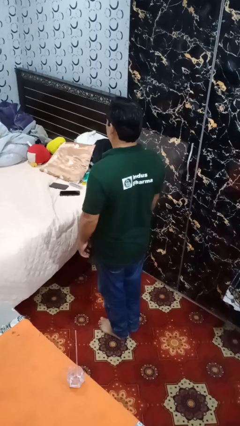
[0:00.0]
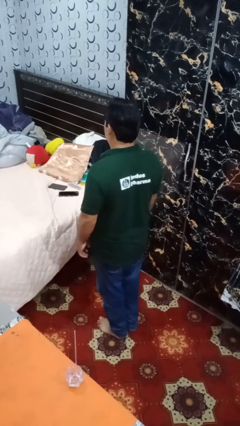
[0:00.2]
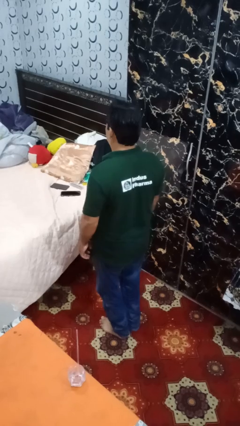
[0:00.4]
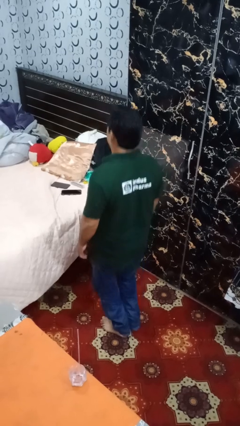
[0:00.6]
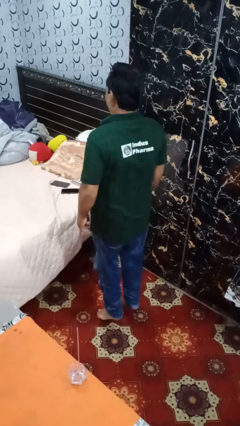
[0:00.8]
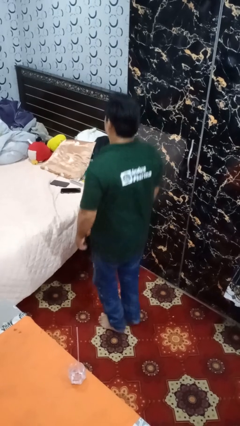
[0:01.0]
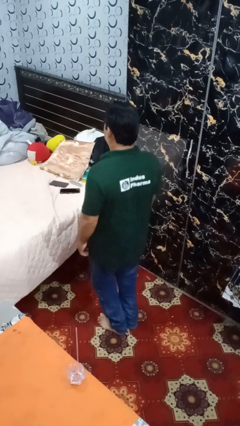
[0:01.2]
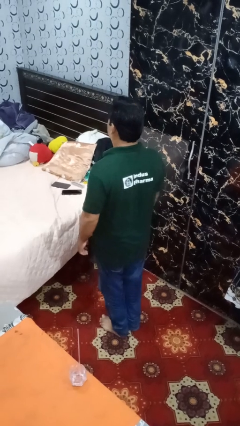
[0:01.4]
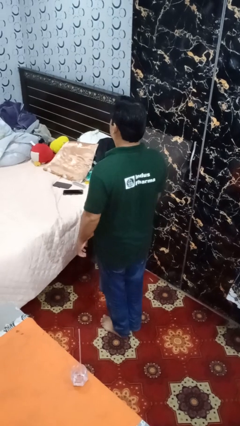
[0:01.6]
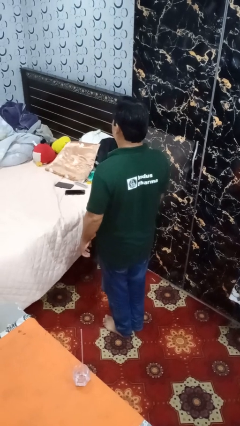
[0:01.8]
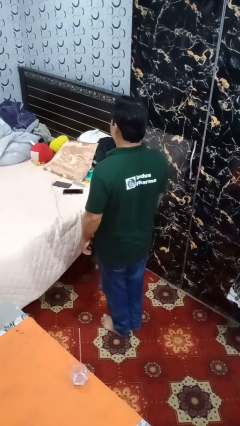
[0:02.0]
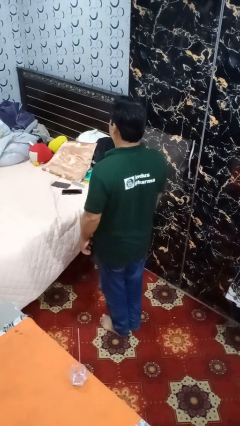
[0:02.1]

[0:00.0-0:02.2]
person jumps

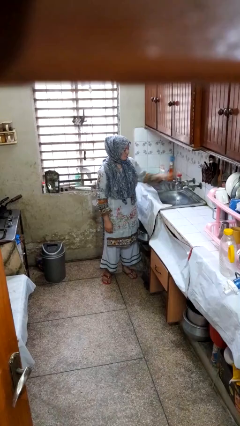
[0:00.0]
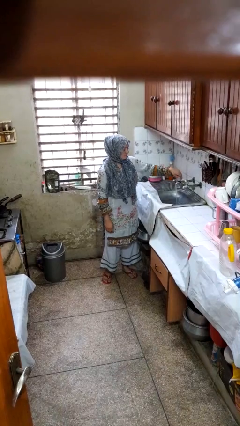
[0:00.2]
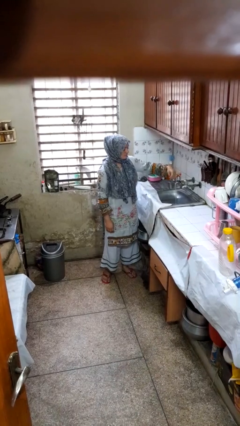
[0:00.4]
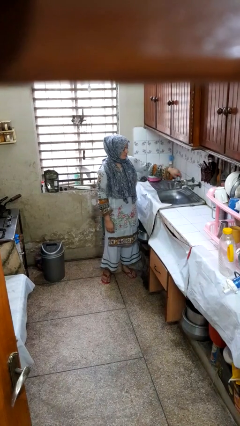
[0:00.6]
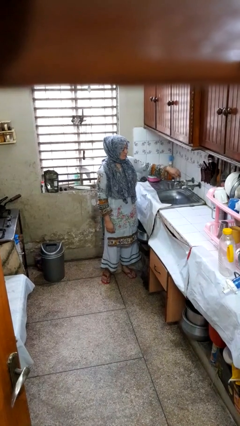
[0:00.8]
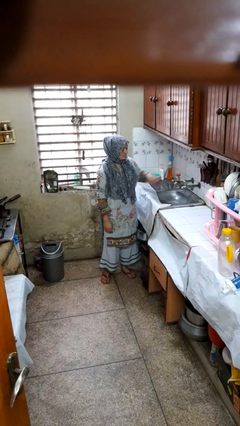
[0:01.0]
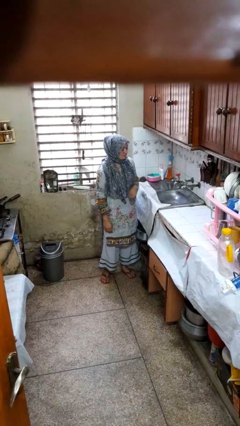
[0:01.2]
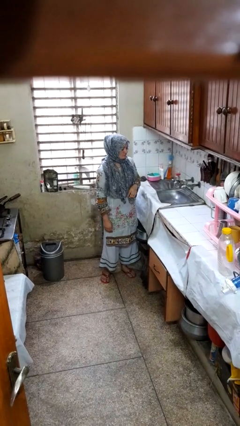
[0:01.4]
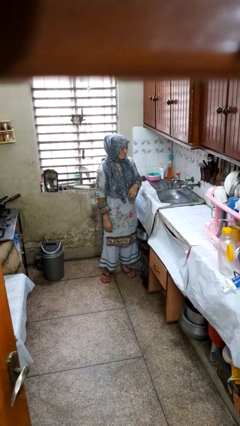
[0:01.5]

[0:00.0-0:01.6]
person turns off faucet

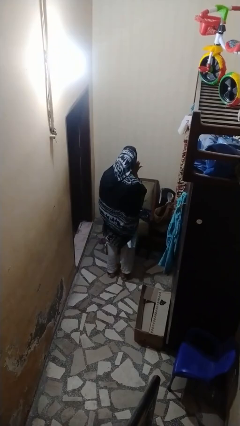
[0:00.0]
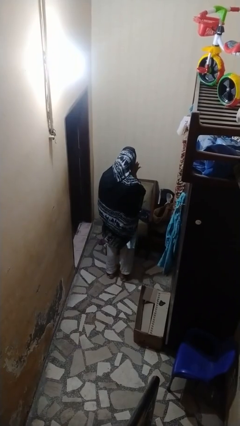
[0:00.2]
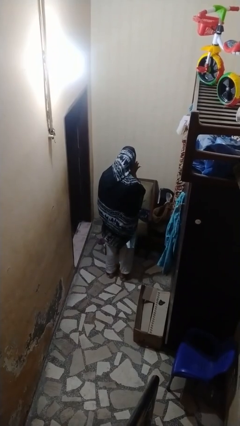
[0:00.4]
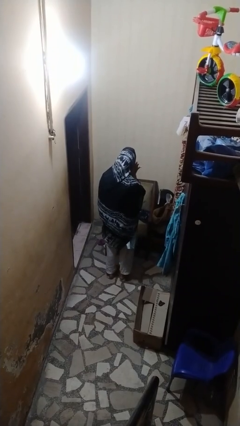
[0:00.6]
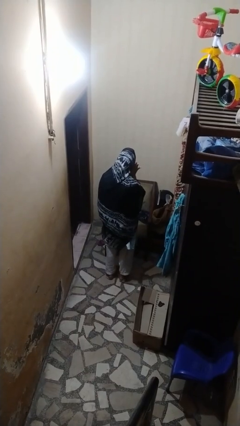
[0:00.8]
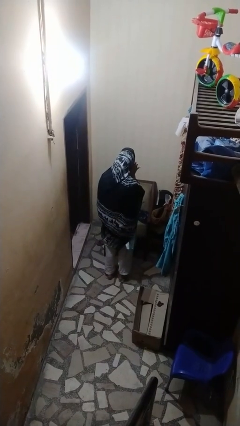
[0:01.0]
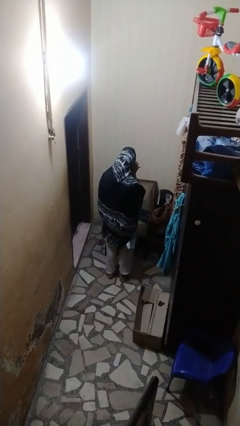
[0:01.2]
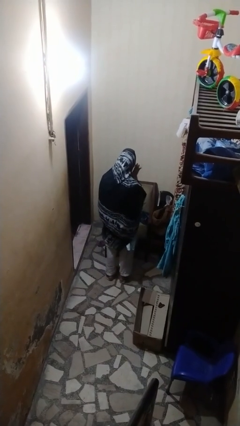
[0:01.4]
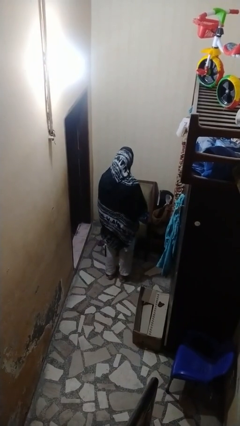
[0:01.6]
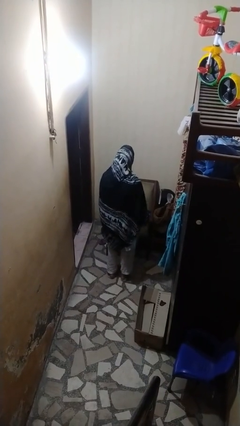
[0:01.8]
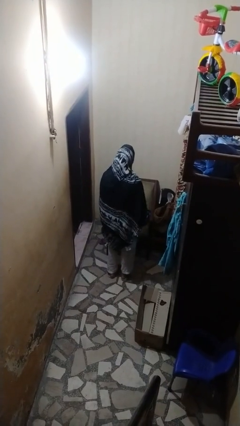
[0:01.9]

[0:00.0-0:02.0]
person gestures listen closely

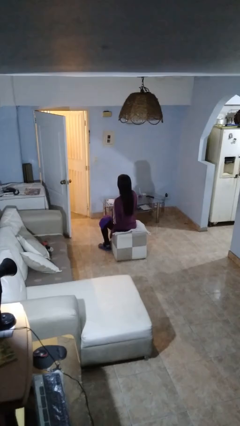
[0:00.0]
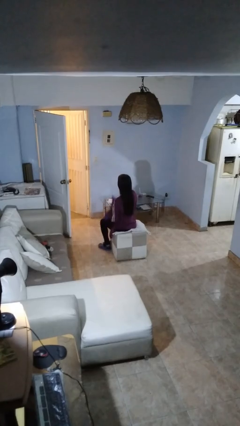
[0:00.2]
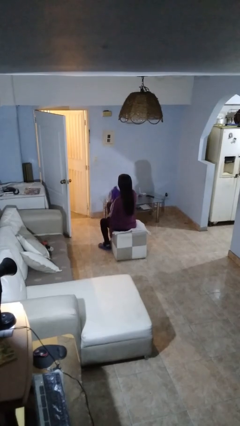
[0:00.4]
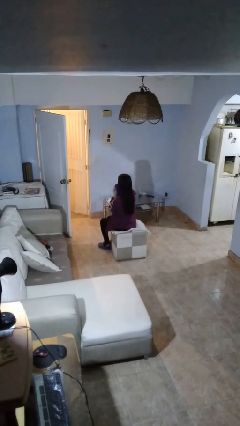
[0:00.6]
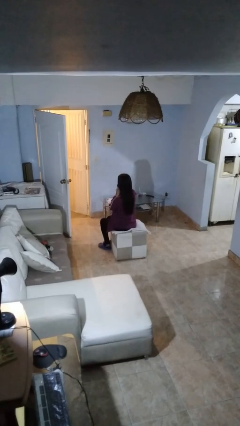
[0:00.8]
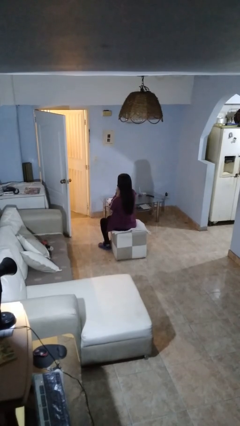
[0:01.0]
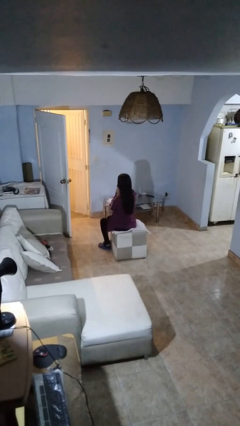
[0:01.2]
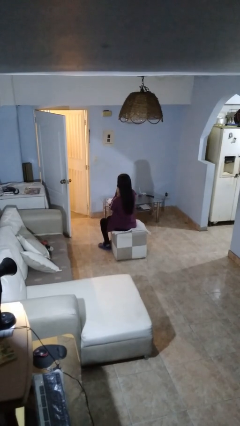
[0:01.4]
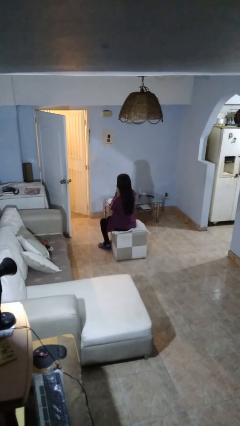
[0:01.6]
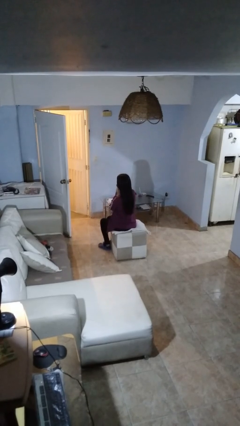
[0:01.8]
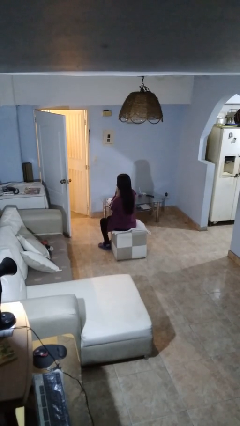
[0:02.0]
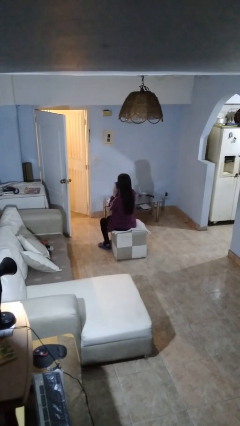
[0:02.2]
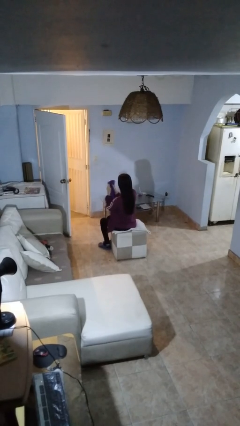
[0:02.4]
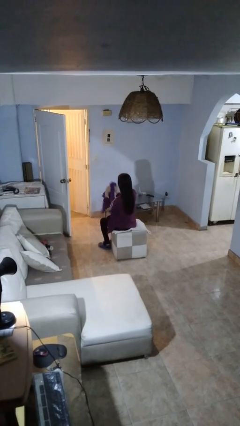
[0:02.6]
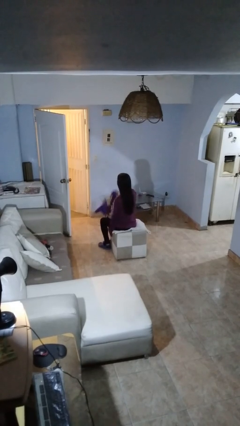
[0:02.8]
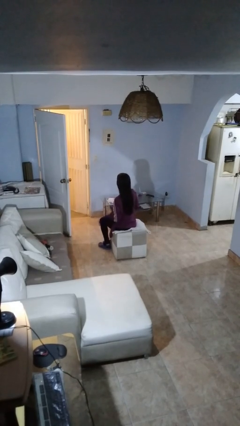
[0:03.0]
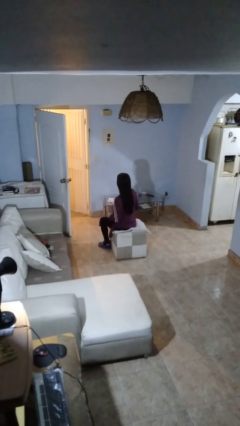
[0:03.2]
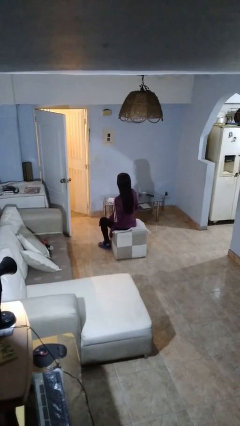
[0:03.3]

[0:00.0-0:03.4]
person wipes mouth with napkin

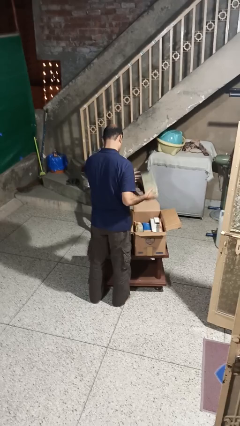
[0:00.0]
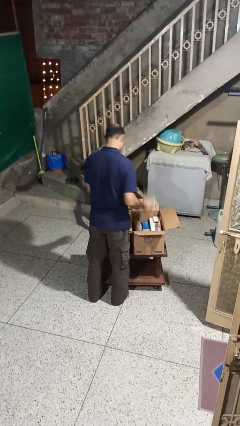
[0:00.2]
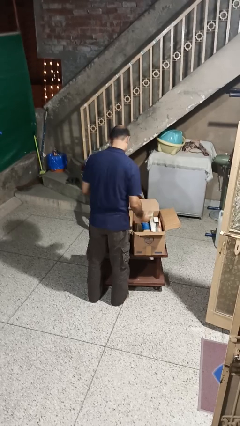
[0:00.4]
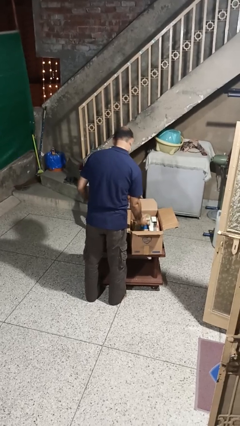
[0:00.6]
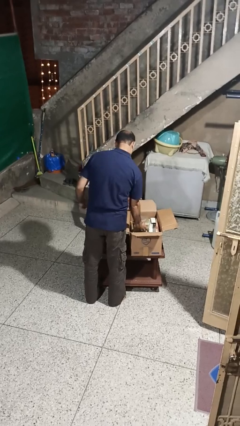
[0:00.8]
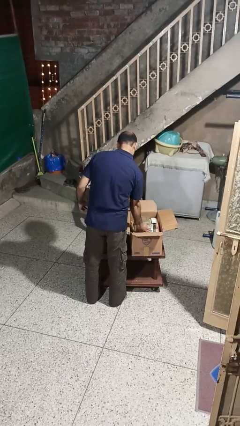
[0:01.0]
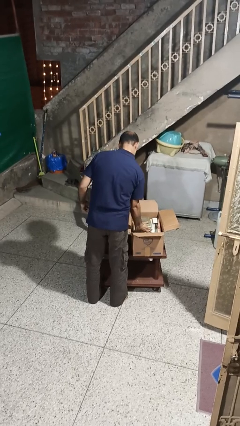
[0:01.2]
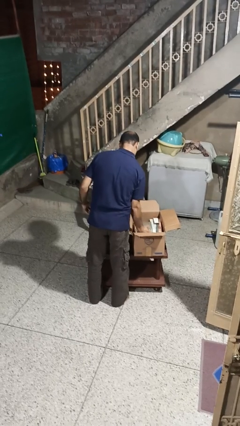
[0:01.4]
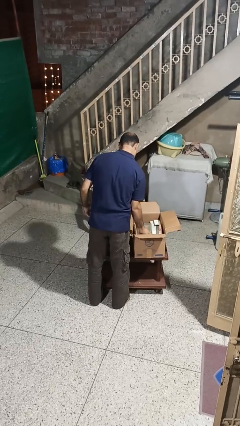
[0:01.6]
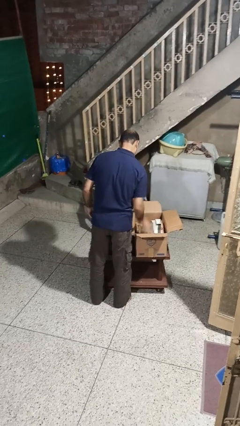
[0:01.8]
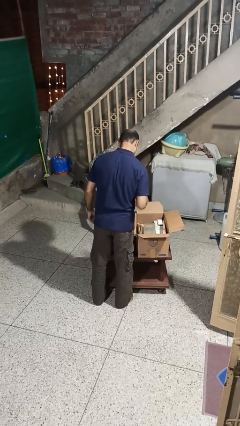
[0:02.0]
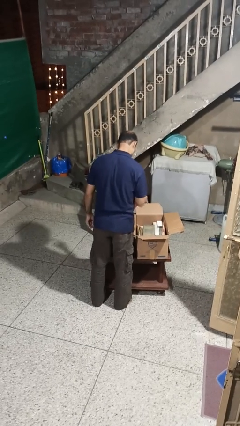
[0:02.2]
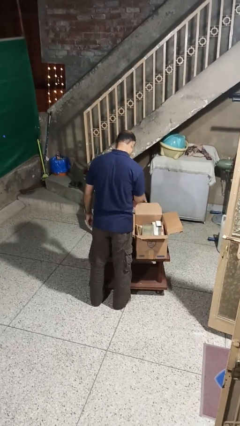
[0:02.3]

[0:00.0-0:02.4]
person puts object into box

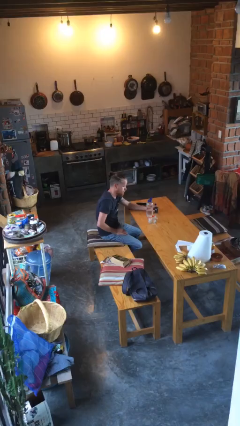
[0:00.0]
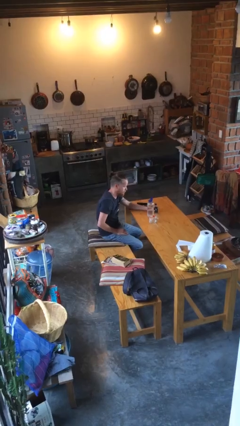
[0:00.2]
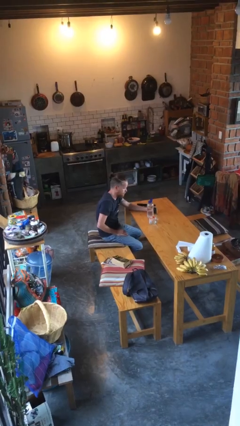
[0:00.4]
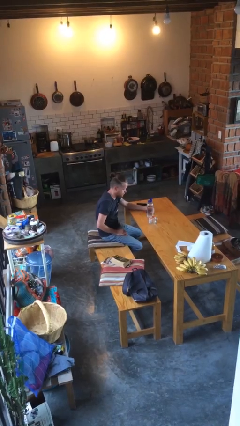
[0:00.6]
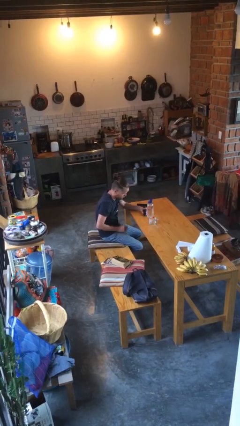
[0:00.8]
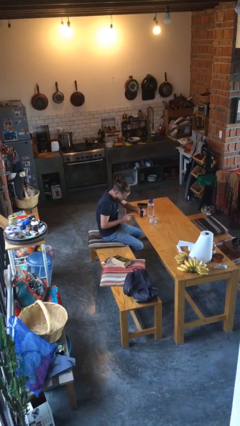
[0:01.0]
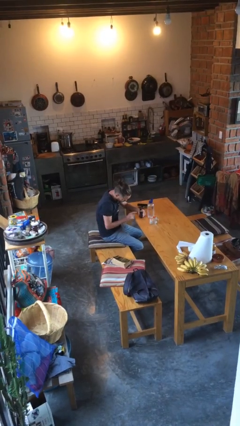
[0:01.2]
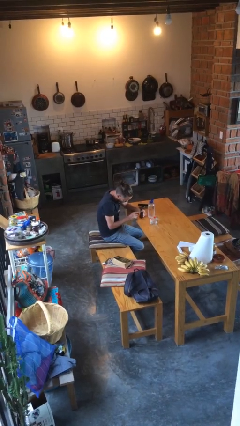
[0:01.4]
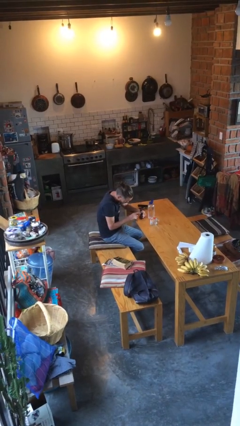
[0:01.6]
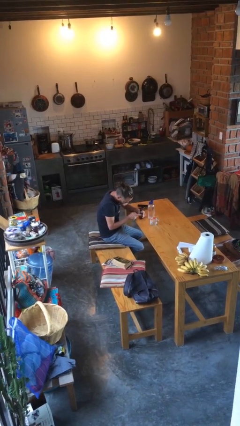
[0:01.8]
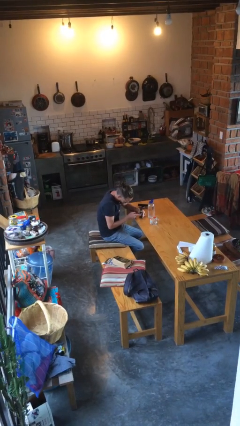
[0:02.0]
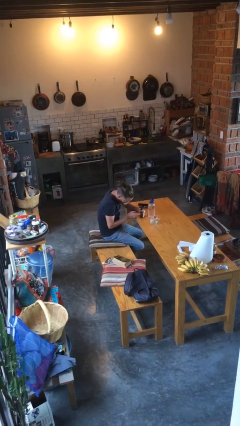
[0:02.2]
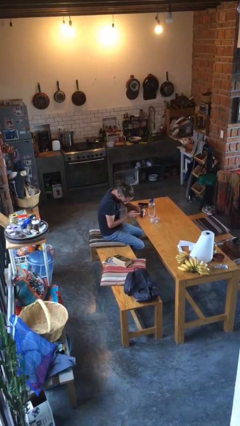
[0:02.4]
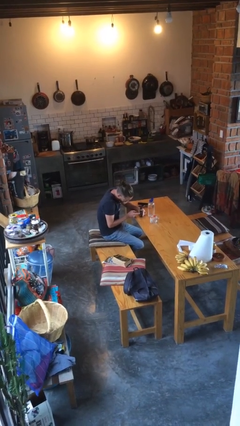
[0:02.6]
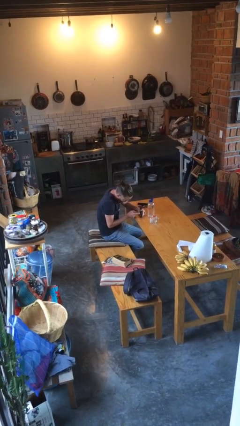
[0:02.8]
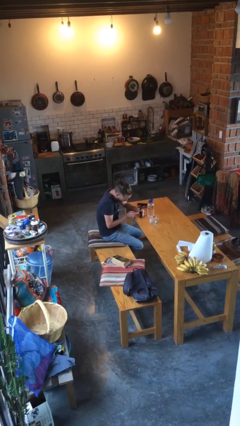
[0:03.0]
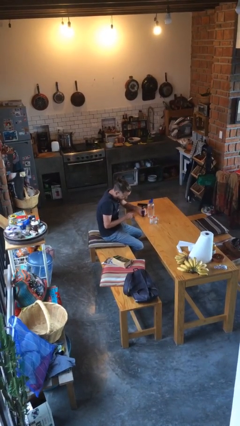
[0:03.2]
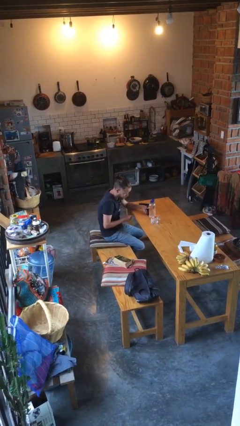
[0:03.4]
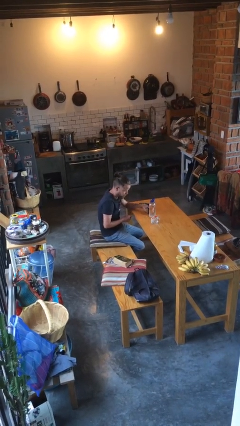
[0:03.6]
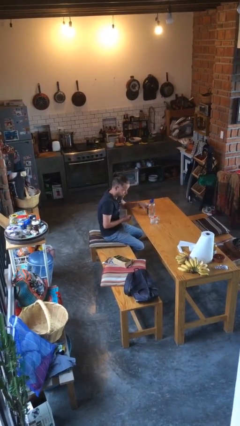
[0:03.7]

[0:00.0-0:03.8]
person taps object with finger

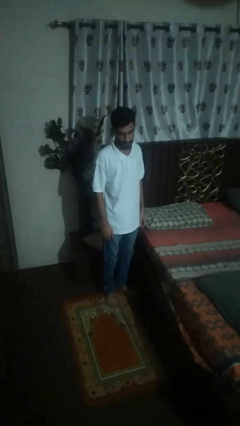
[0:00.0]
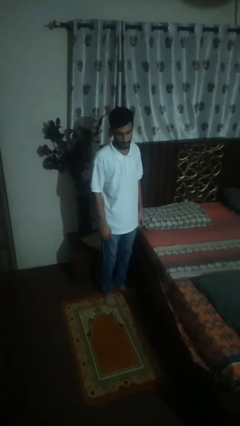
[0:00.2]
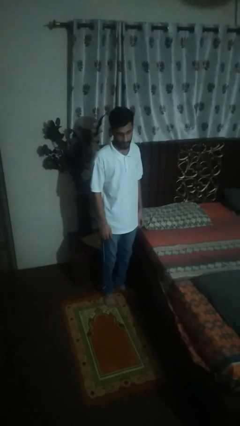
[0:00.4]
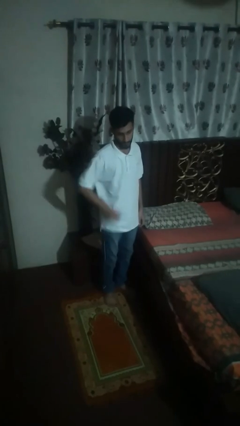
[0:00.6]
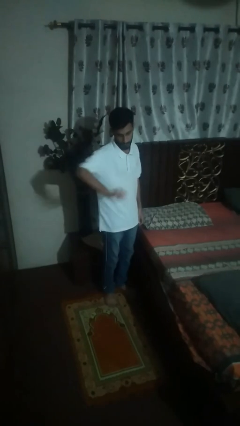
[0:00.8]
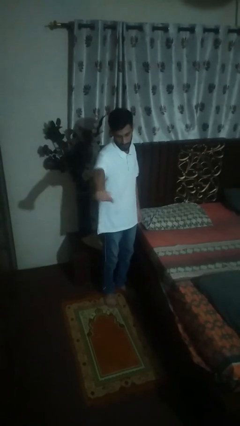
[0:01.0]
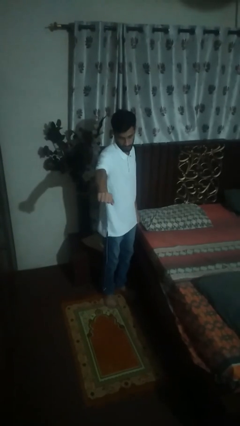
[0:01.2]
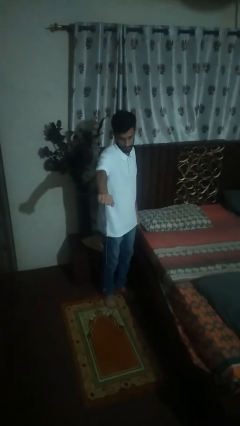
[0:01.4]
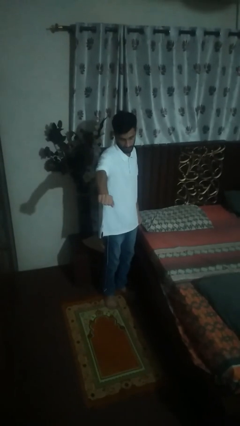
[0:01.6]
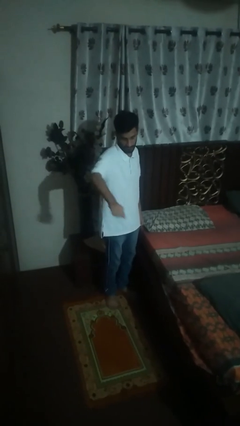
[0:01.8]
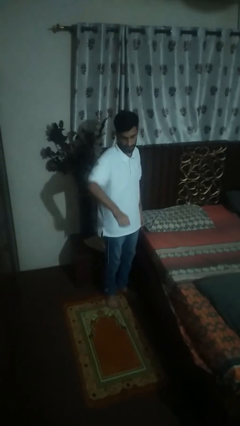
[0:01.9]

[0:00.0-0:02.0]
person karate chop
